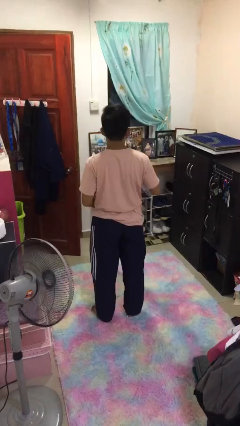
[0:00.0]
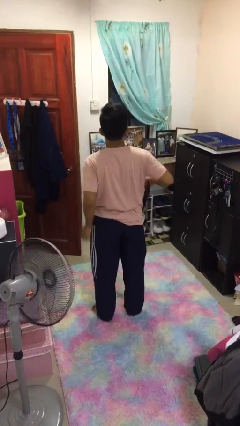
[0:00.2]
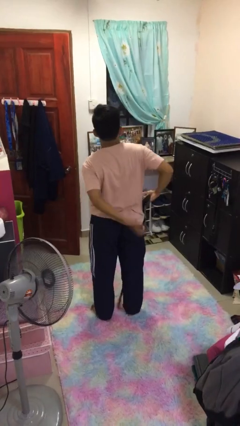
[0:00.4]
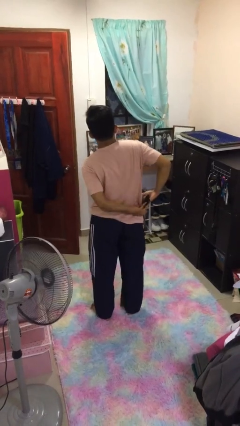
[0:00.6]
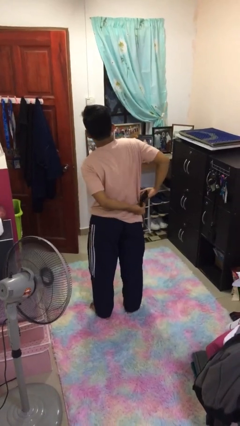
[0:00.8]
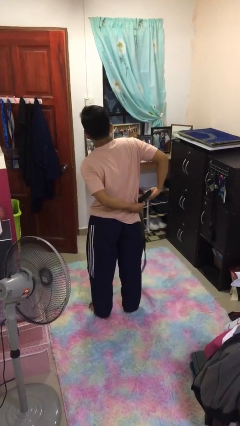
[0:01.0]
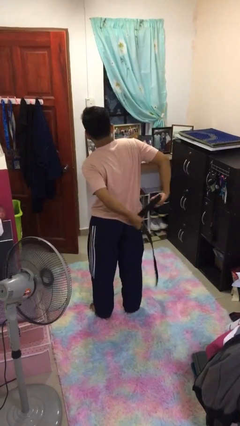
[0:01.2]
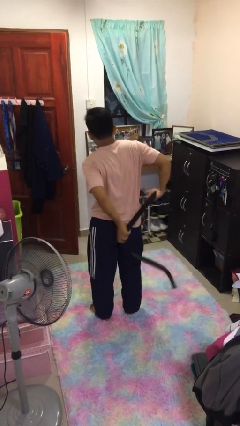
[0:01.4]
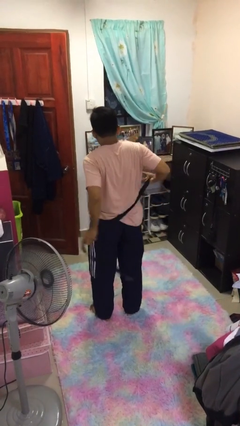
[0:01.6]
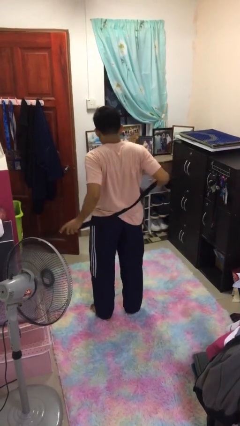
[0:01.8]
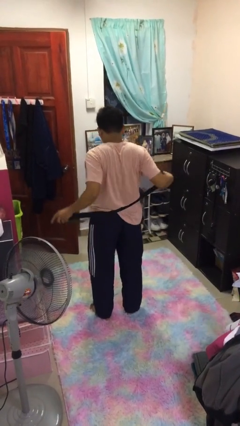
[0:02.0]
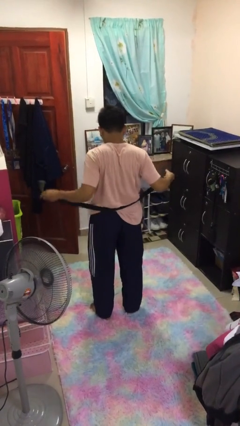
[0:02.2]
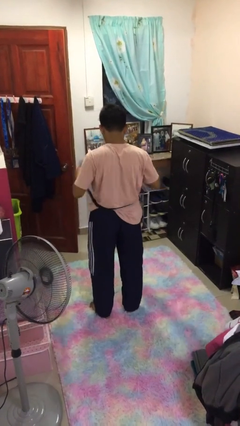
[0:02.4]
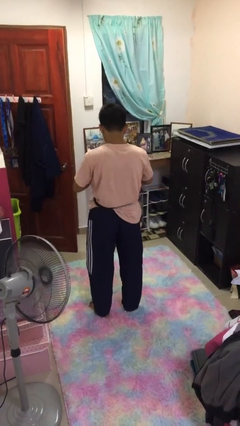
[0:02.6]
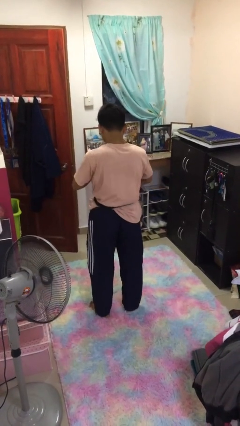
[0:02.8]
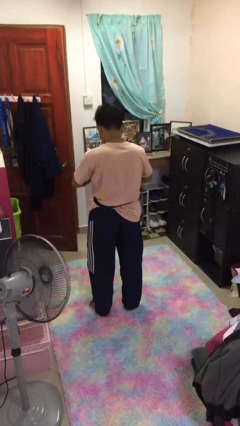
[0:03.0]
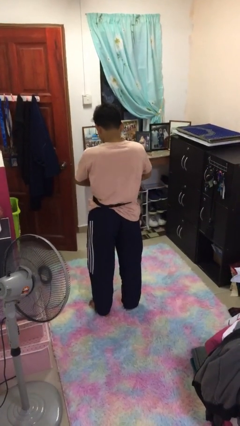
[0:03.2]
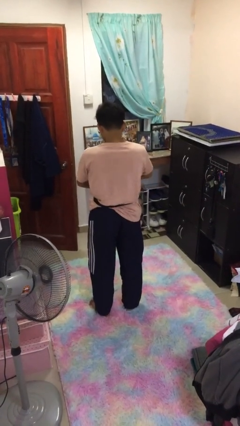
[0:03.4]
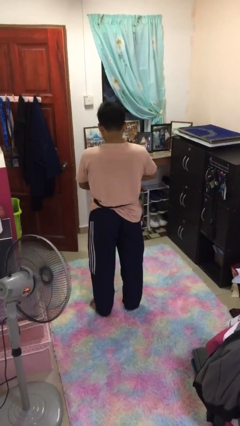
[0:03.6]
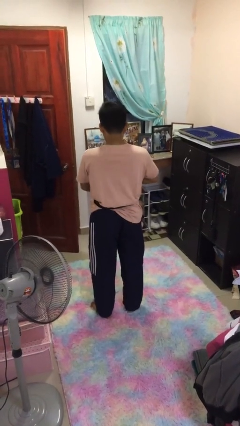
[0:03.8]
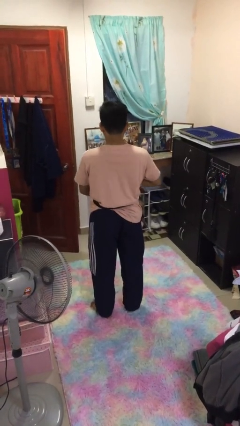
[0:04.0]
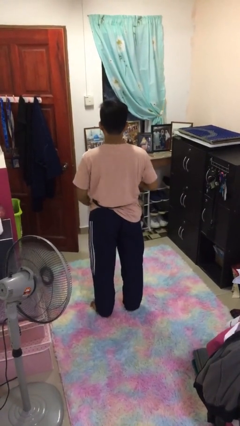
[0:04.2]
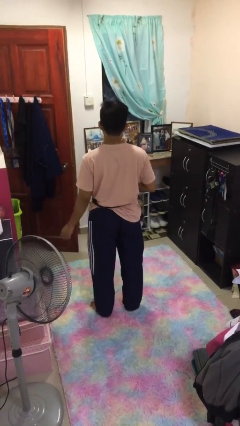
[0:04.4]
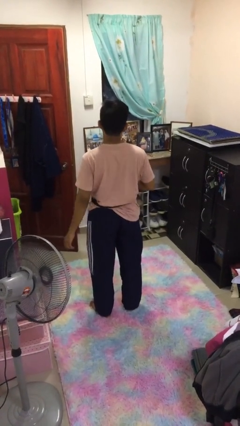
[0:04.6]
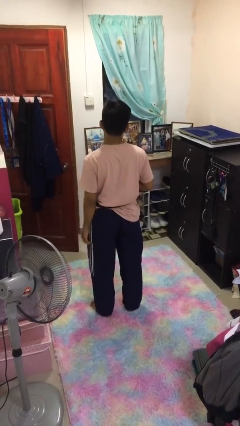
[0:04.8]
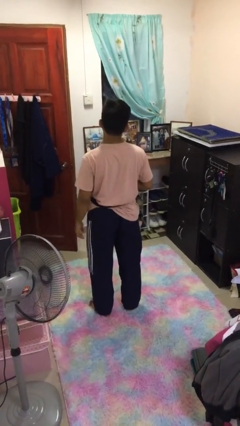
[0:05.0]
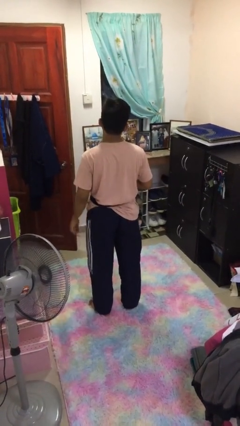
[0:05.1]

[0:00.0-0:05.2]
person puts on belt

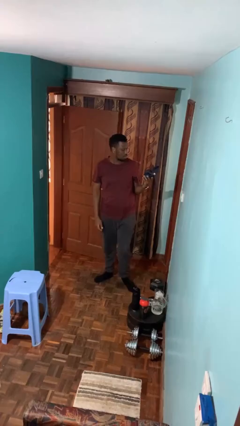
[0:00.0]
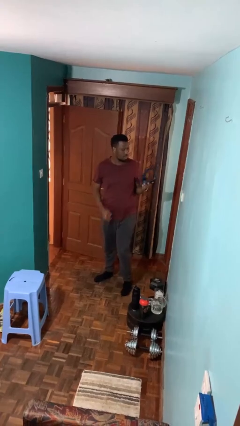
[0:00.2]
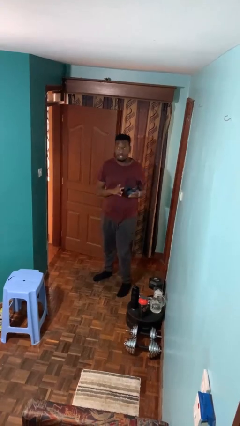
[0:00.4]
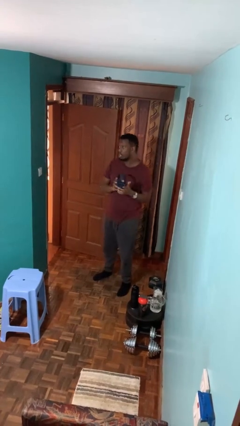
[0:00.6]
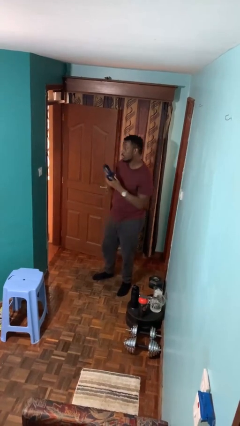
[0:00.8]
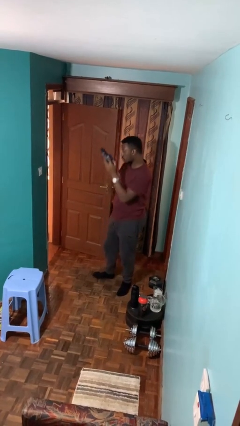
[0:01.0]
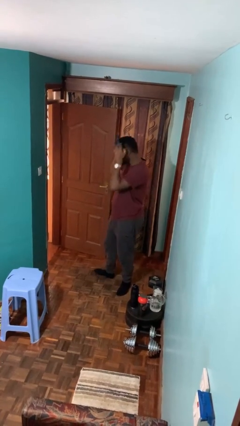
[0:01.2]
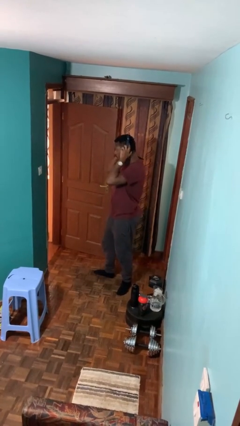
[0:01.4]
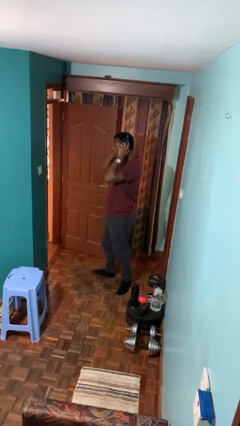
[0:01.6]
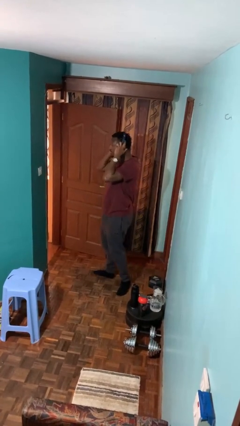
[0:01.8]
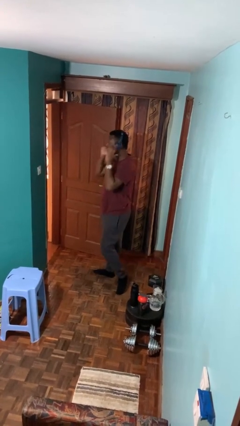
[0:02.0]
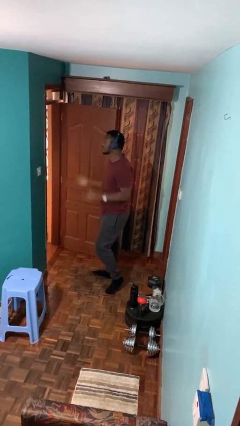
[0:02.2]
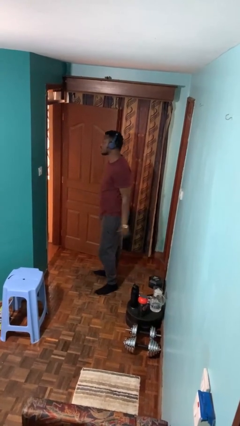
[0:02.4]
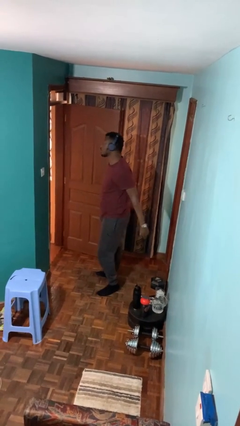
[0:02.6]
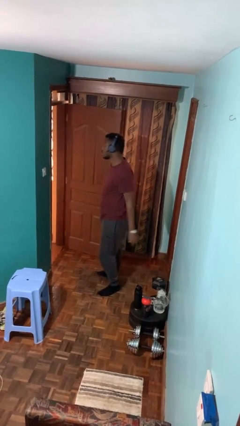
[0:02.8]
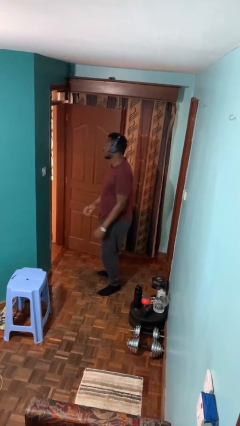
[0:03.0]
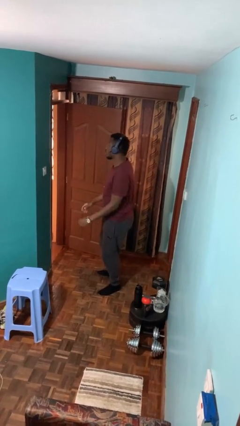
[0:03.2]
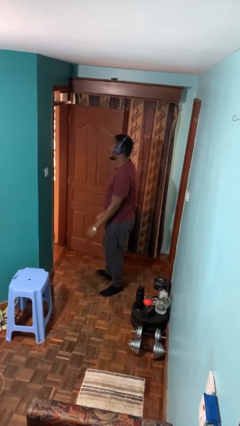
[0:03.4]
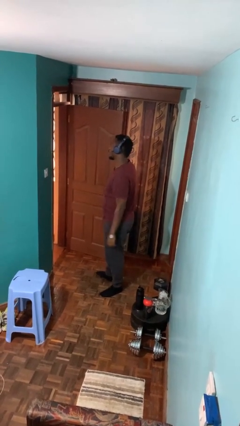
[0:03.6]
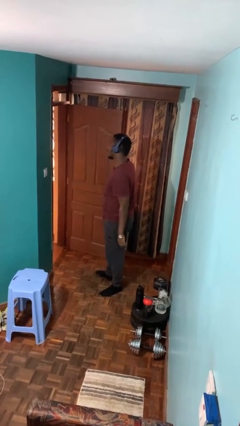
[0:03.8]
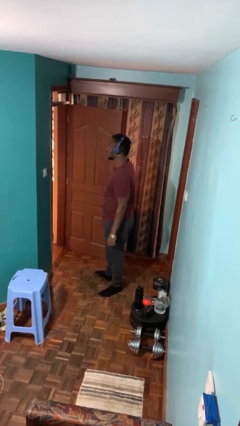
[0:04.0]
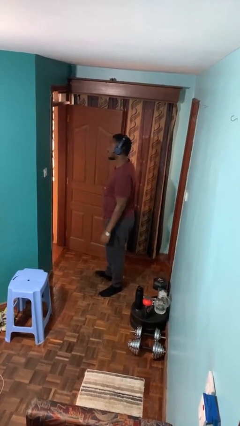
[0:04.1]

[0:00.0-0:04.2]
person puts on headphones

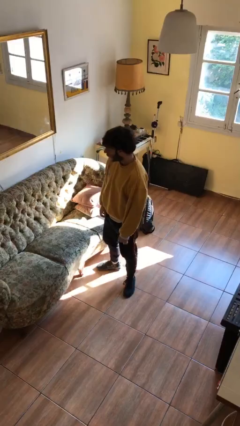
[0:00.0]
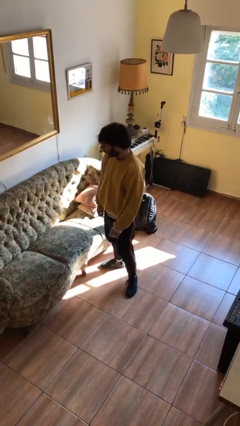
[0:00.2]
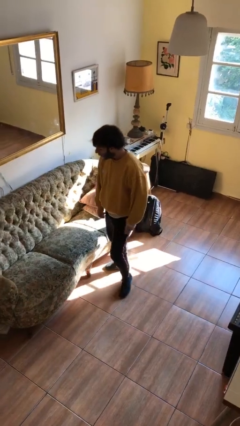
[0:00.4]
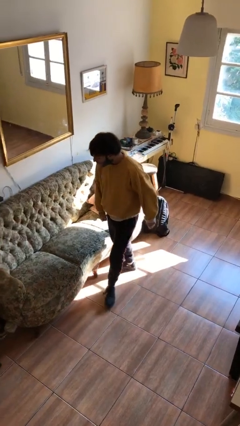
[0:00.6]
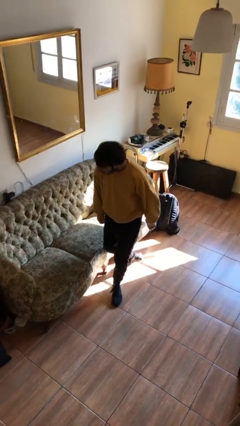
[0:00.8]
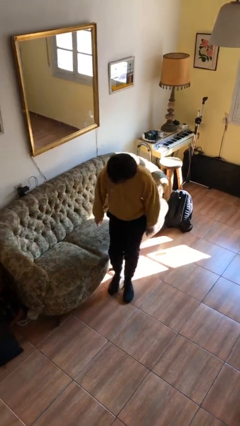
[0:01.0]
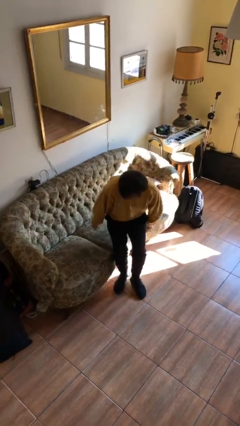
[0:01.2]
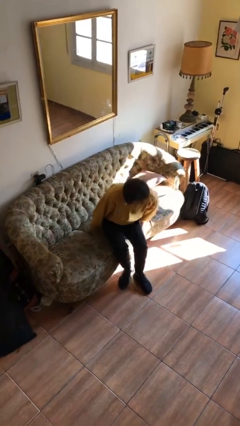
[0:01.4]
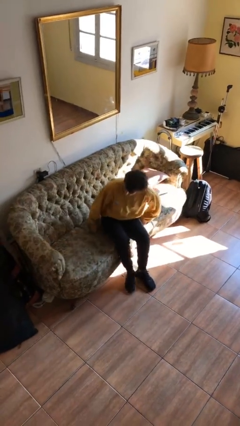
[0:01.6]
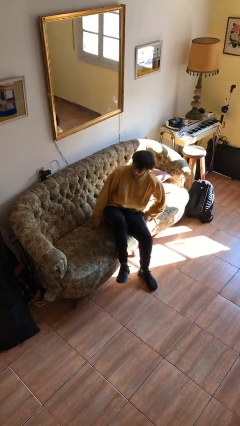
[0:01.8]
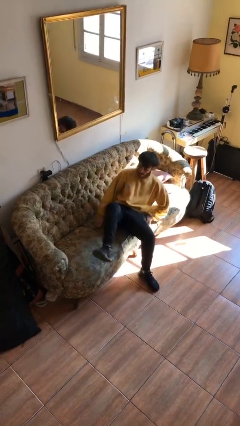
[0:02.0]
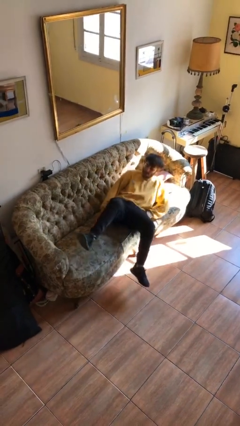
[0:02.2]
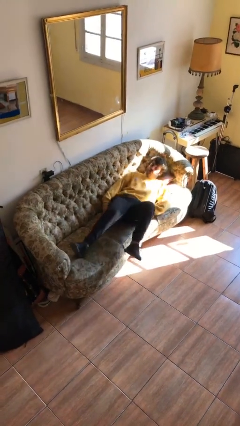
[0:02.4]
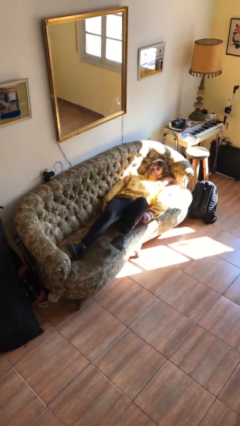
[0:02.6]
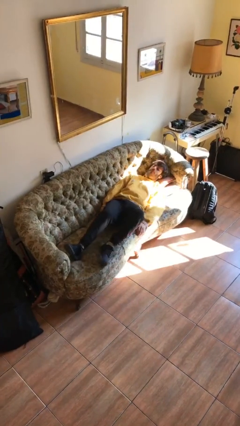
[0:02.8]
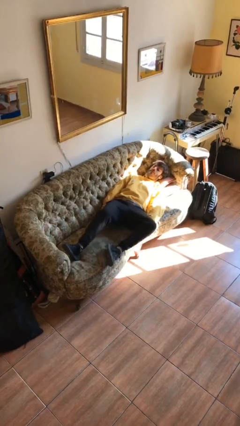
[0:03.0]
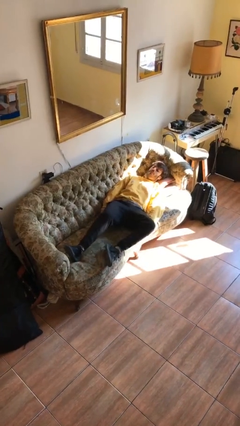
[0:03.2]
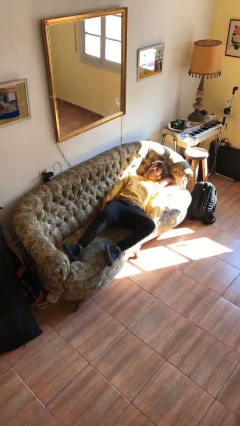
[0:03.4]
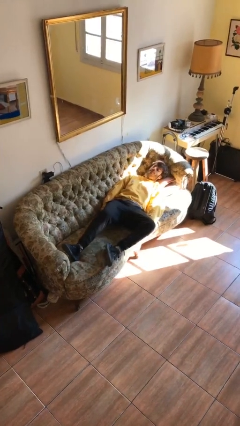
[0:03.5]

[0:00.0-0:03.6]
person lies down on couch

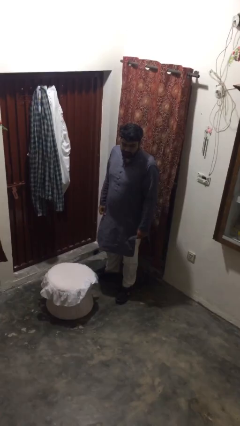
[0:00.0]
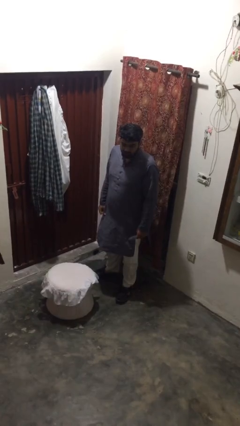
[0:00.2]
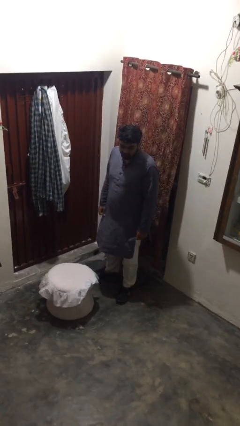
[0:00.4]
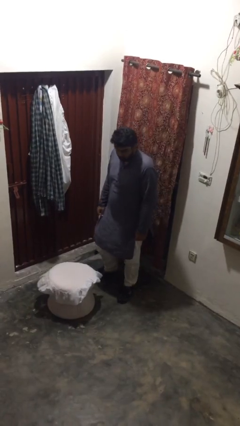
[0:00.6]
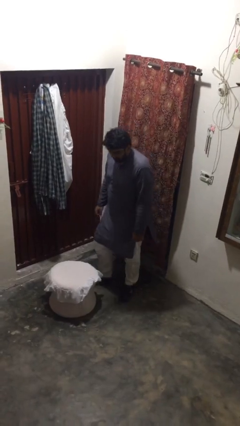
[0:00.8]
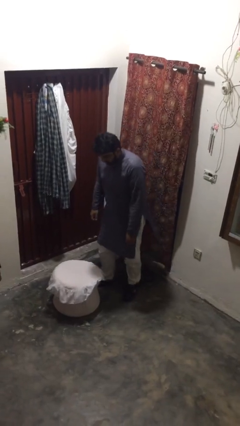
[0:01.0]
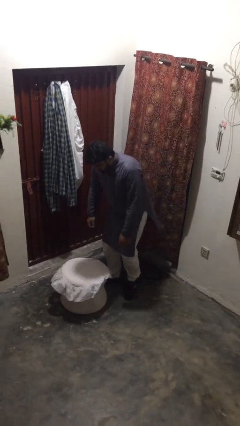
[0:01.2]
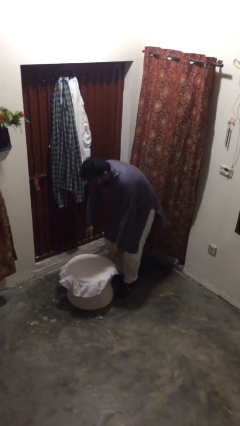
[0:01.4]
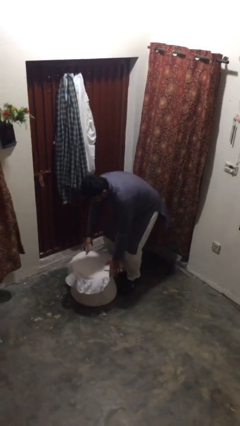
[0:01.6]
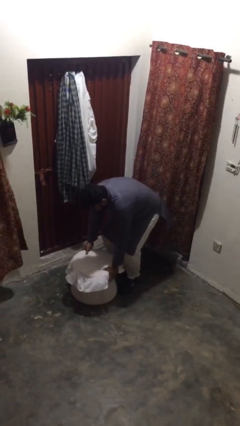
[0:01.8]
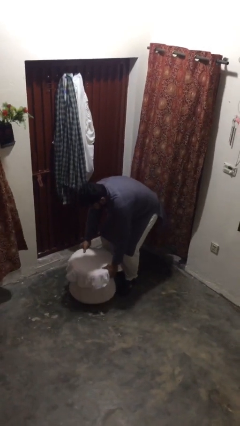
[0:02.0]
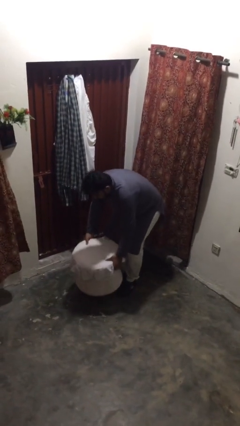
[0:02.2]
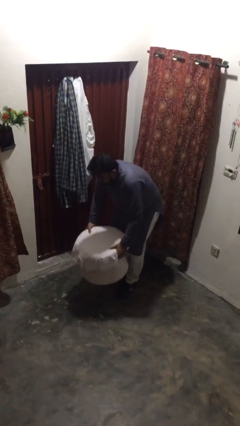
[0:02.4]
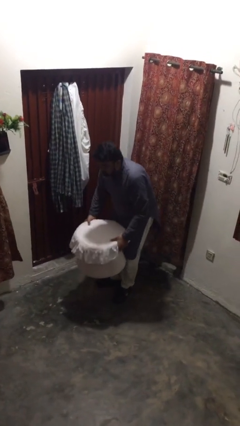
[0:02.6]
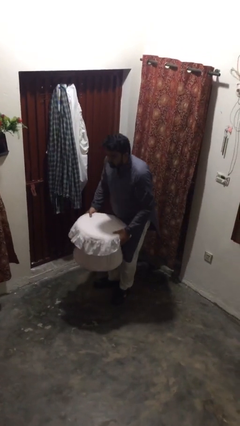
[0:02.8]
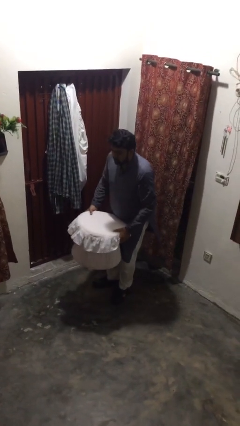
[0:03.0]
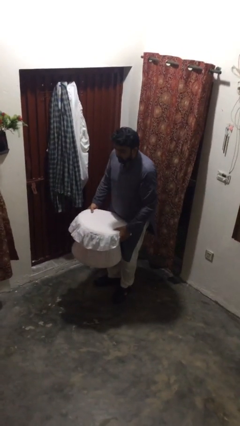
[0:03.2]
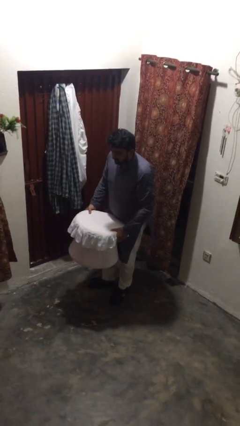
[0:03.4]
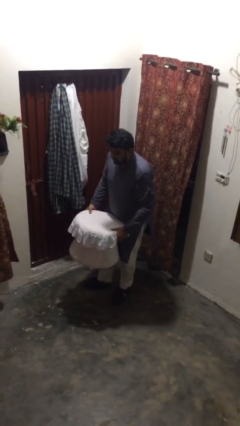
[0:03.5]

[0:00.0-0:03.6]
person picks up object from floor

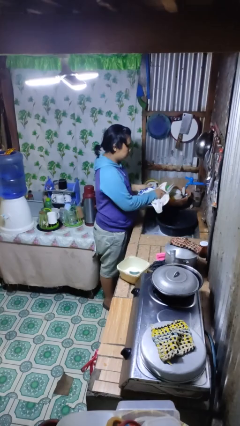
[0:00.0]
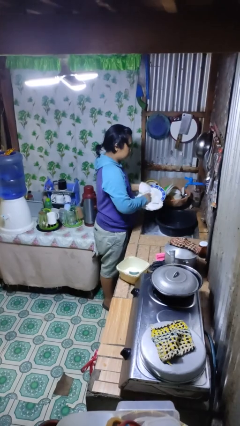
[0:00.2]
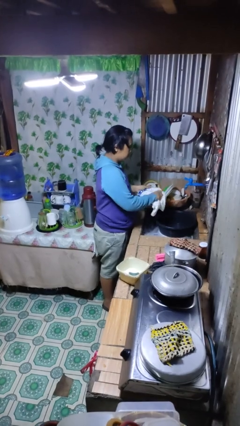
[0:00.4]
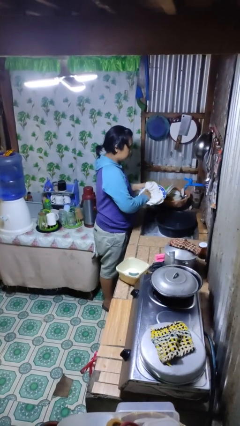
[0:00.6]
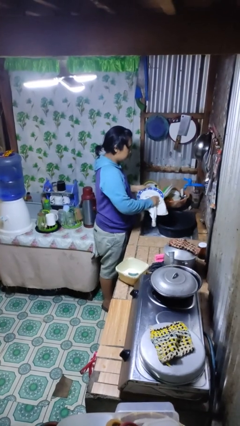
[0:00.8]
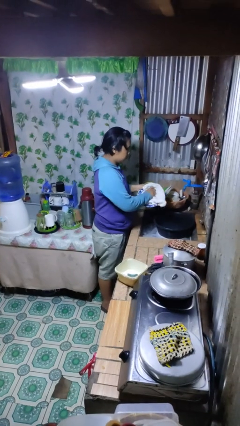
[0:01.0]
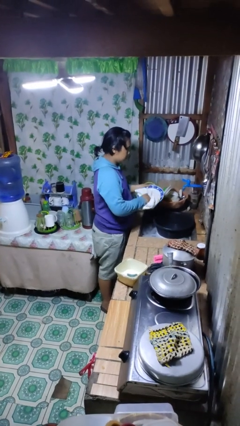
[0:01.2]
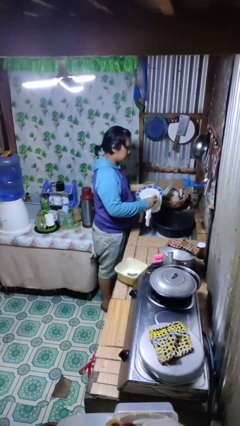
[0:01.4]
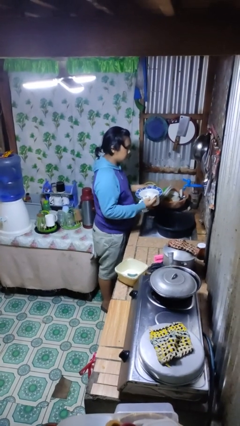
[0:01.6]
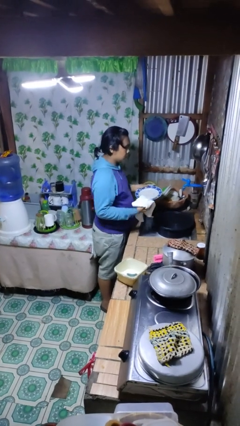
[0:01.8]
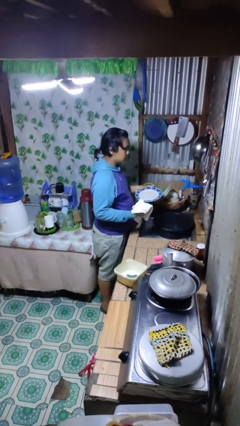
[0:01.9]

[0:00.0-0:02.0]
person dries dish
